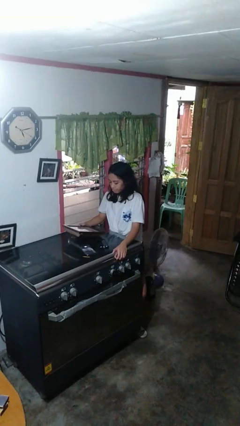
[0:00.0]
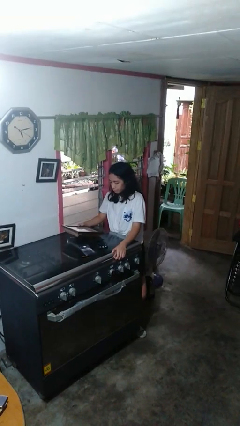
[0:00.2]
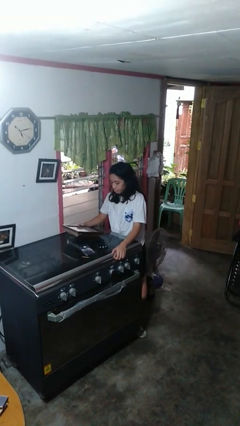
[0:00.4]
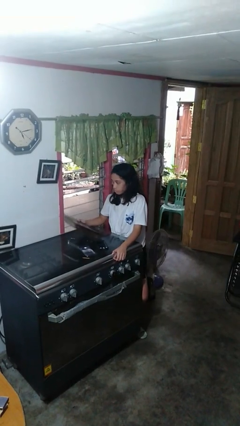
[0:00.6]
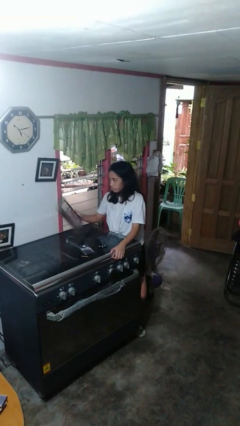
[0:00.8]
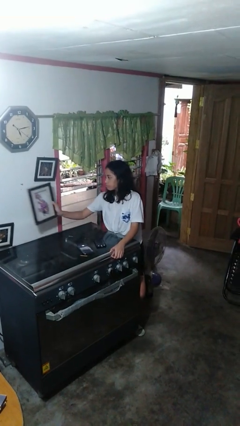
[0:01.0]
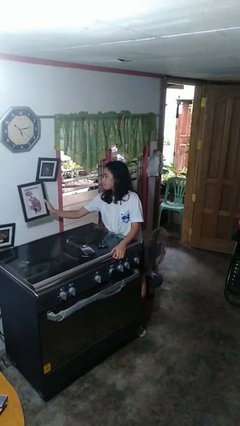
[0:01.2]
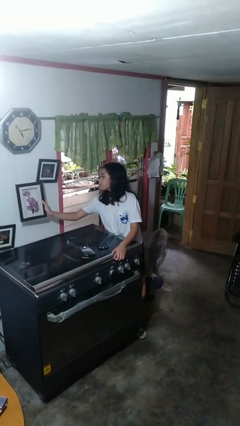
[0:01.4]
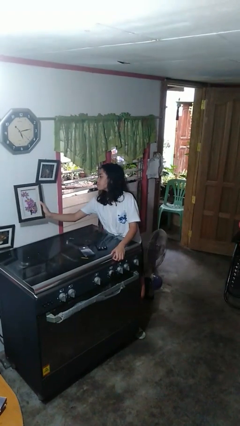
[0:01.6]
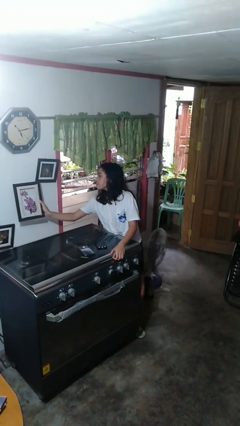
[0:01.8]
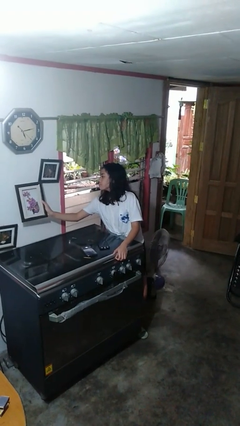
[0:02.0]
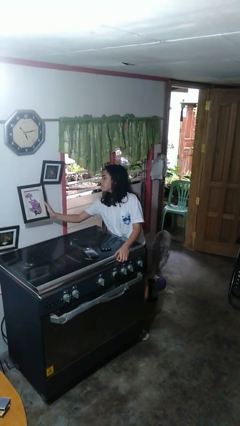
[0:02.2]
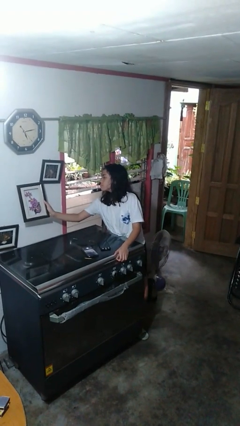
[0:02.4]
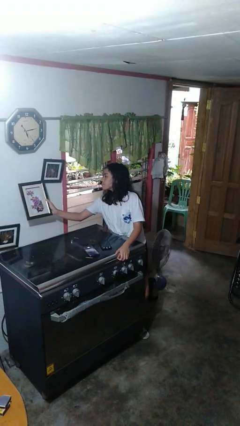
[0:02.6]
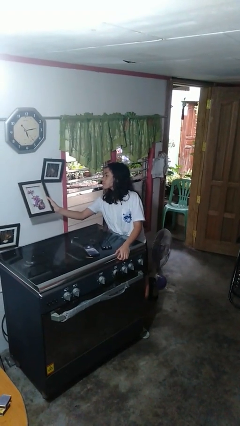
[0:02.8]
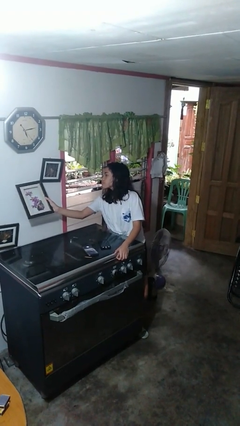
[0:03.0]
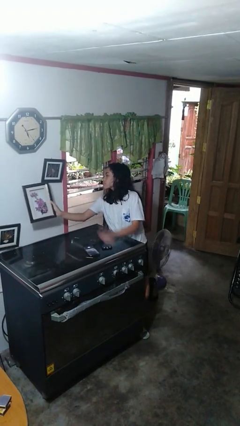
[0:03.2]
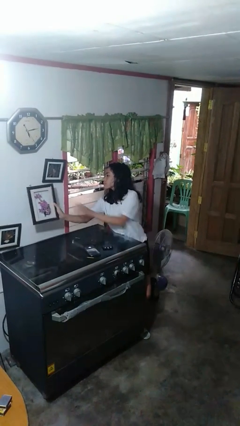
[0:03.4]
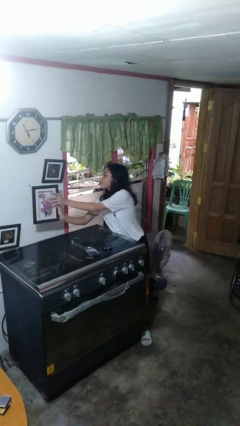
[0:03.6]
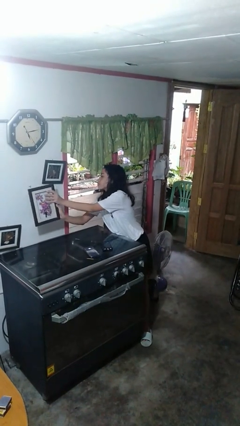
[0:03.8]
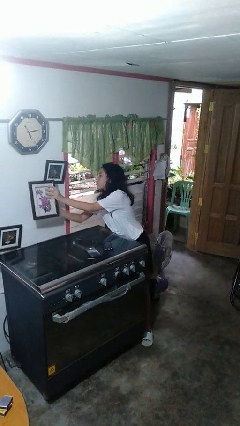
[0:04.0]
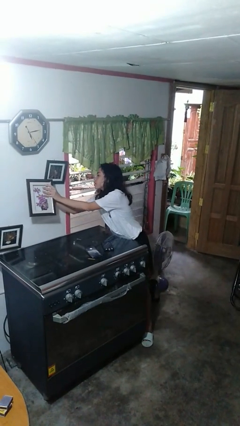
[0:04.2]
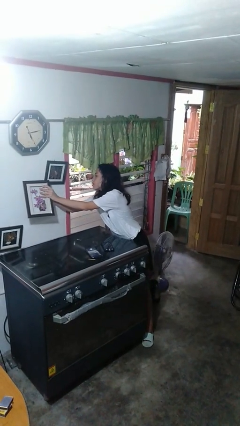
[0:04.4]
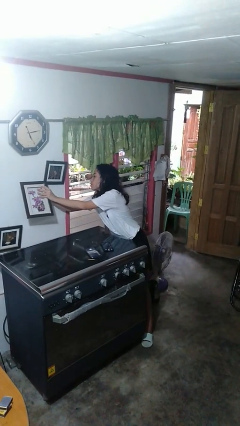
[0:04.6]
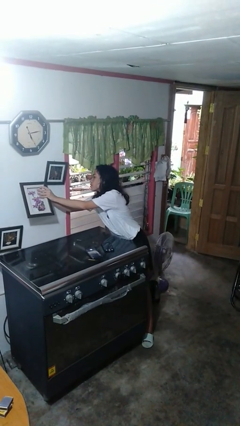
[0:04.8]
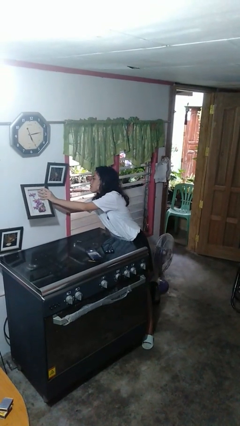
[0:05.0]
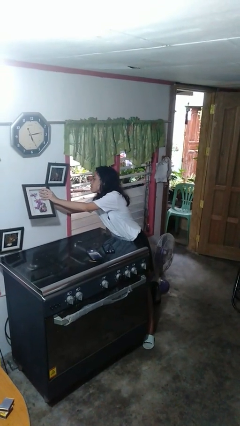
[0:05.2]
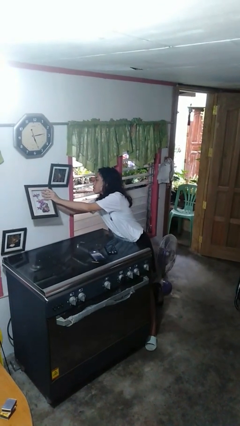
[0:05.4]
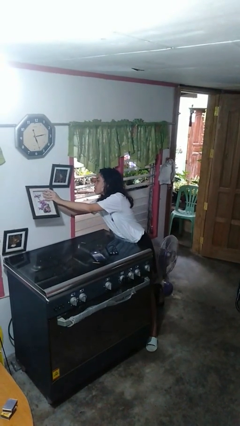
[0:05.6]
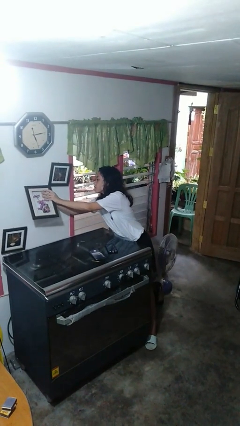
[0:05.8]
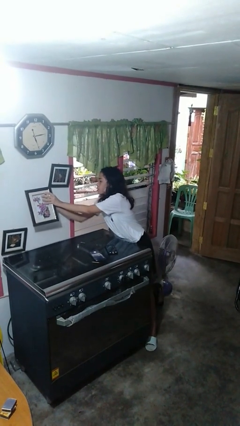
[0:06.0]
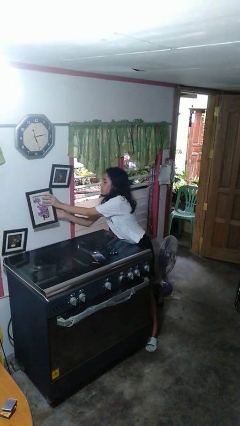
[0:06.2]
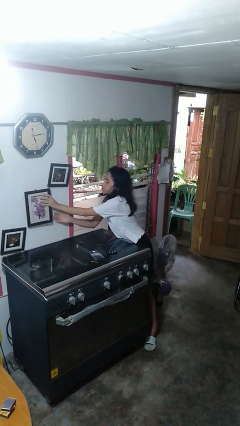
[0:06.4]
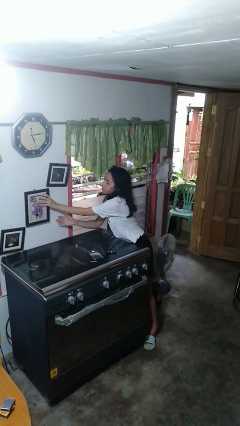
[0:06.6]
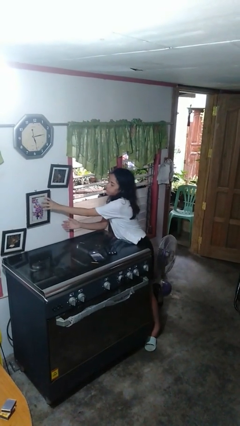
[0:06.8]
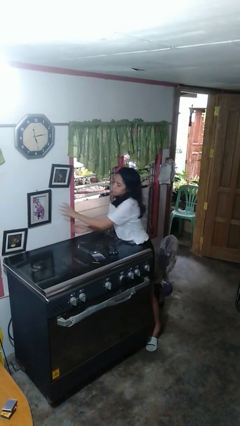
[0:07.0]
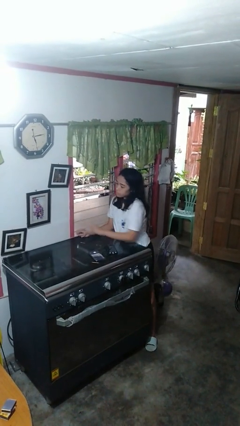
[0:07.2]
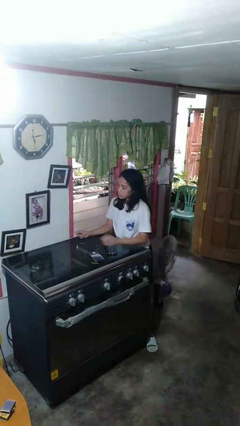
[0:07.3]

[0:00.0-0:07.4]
person puts up picture frame

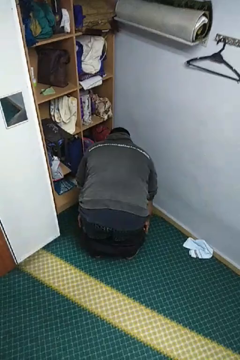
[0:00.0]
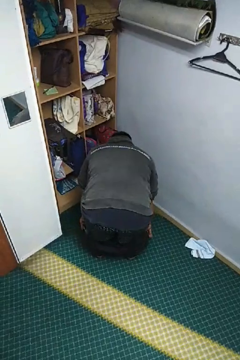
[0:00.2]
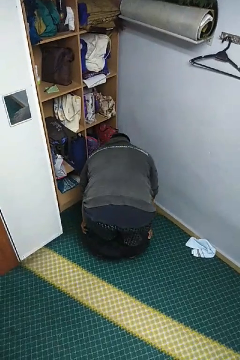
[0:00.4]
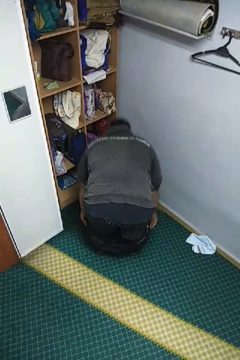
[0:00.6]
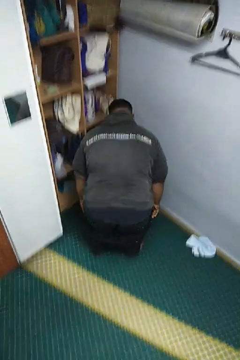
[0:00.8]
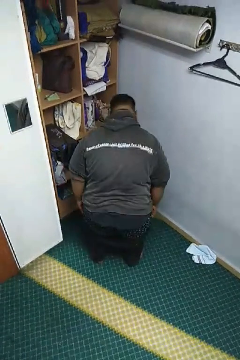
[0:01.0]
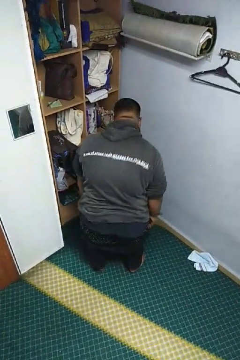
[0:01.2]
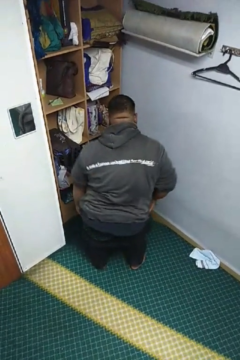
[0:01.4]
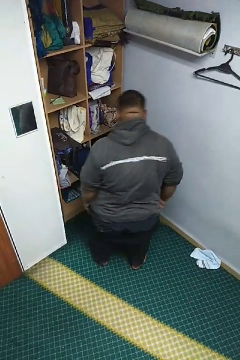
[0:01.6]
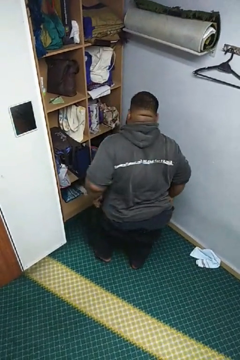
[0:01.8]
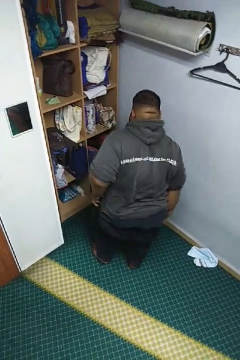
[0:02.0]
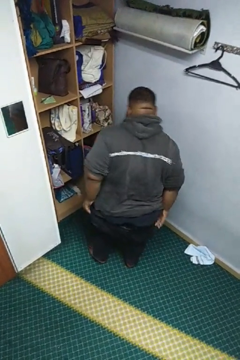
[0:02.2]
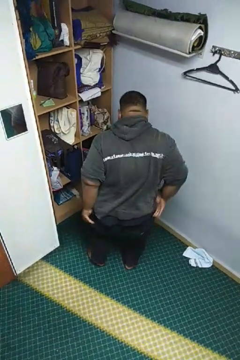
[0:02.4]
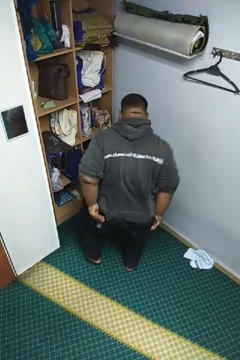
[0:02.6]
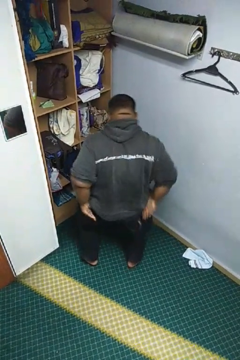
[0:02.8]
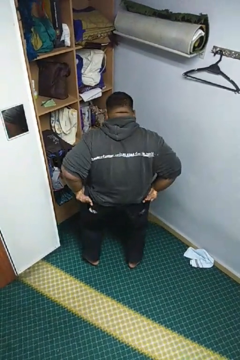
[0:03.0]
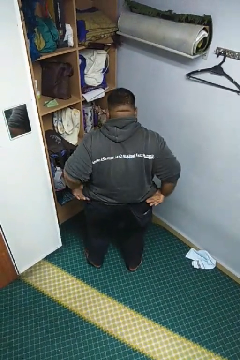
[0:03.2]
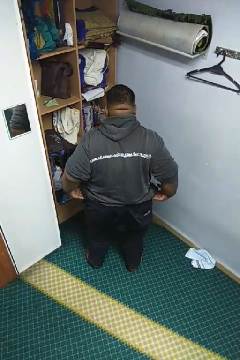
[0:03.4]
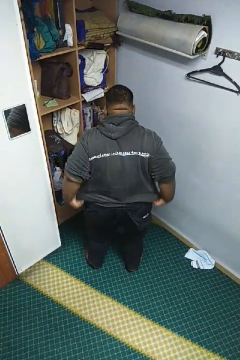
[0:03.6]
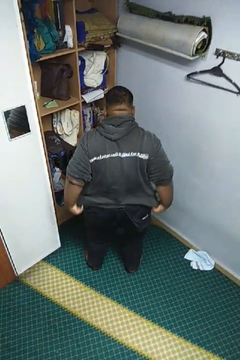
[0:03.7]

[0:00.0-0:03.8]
person puts on pants

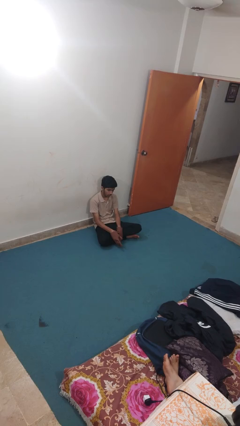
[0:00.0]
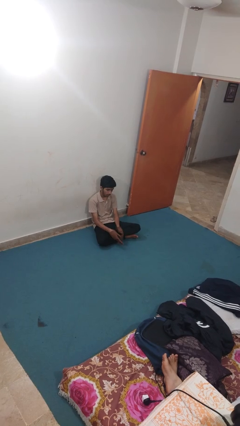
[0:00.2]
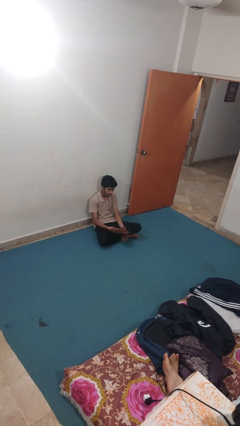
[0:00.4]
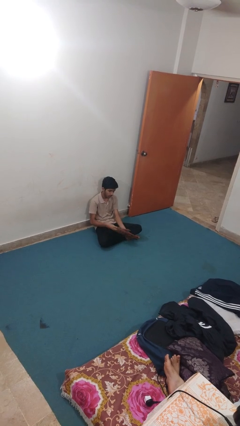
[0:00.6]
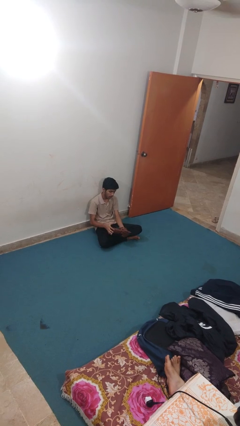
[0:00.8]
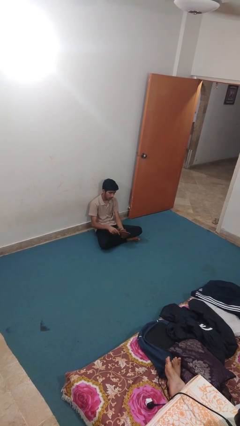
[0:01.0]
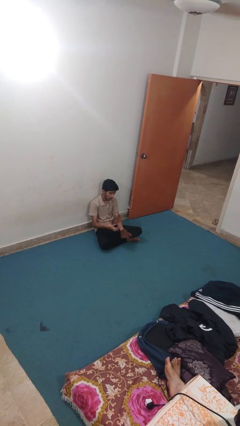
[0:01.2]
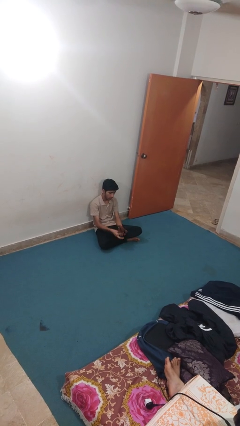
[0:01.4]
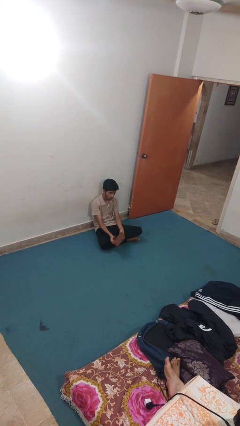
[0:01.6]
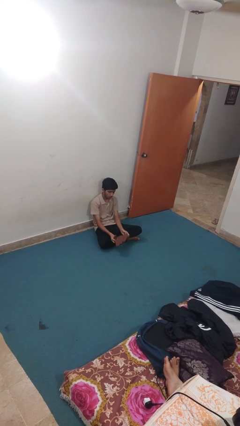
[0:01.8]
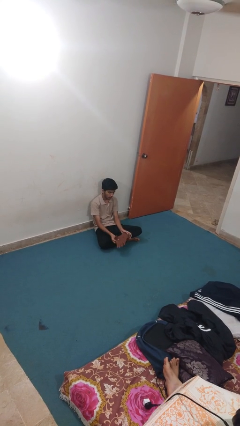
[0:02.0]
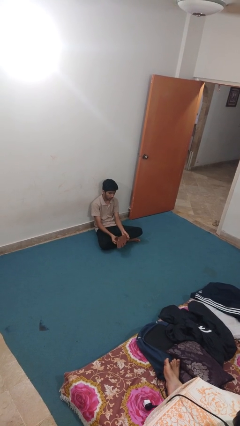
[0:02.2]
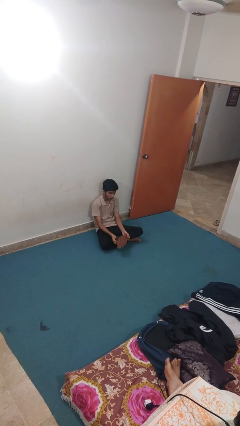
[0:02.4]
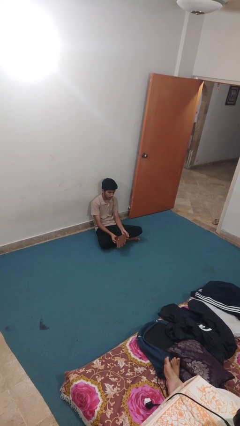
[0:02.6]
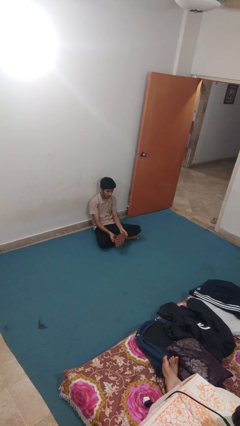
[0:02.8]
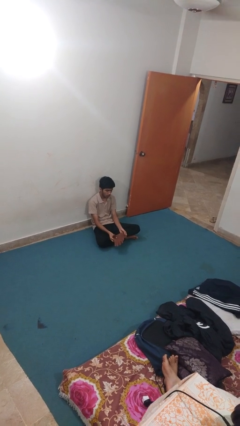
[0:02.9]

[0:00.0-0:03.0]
person takes off gloves

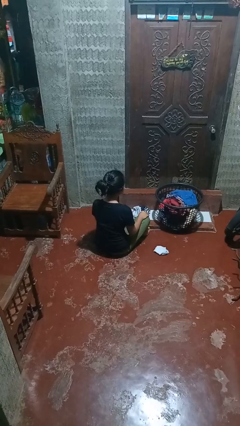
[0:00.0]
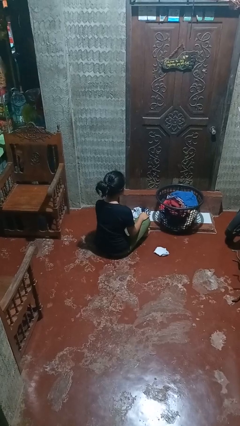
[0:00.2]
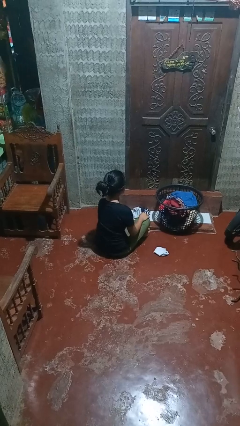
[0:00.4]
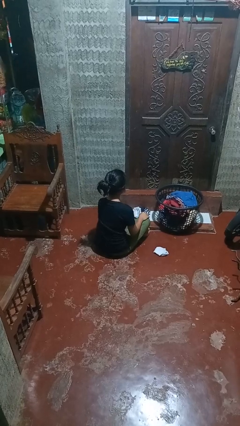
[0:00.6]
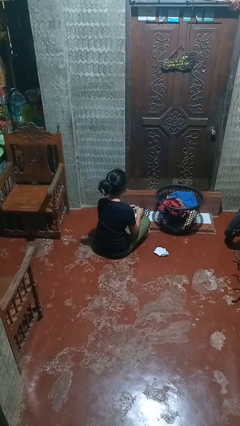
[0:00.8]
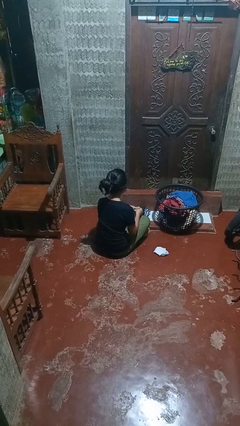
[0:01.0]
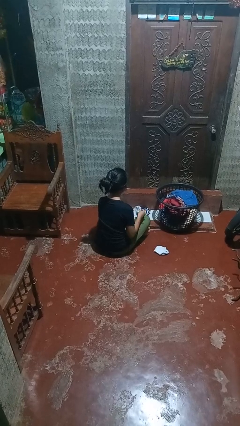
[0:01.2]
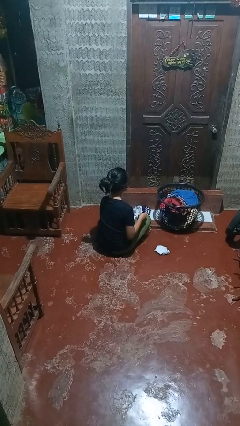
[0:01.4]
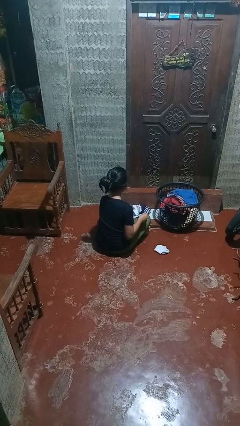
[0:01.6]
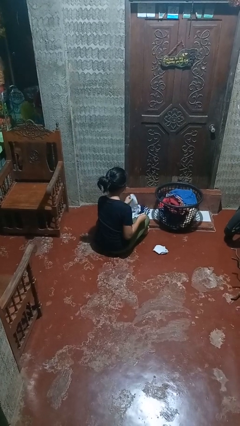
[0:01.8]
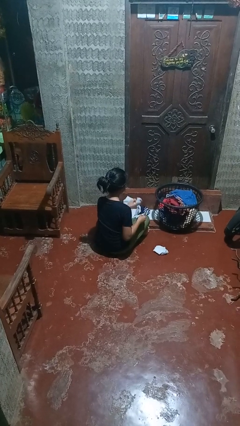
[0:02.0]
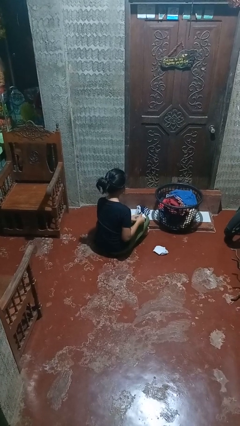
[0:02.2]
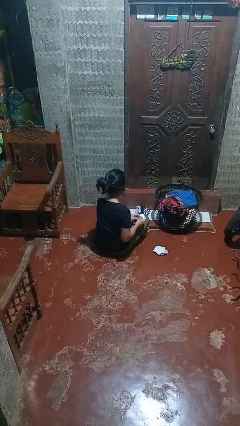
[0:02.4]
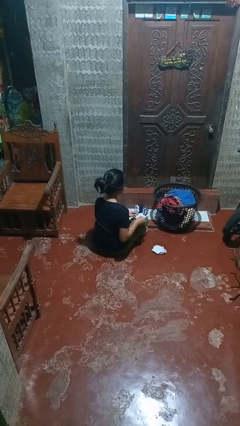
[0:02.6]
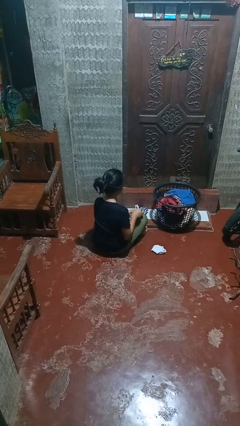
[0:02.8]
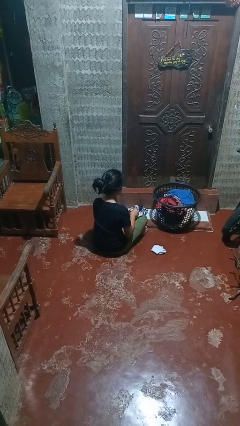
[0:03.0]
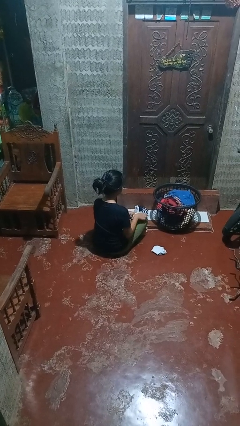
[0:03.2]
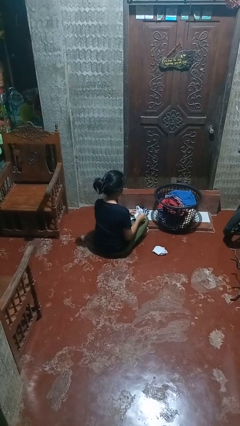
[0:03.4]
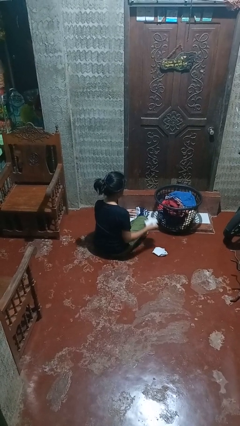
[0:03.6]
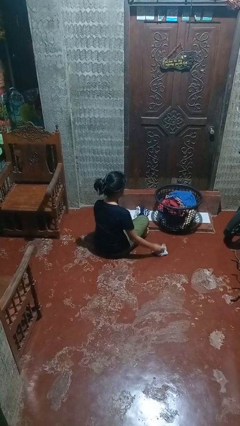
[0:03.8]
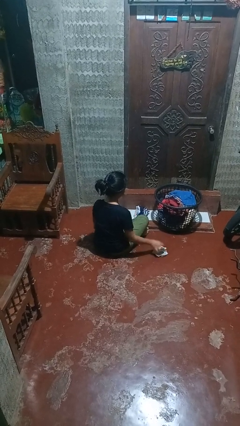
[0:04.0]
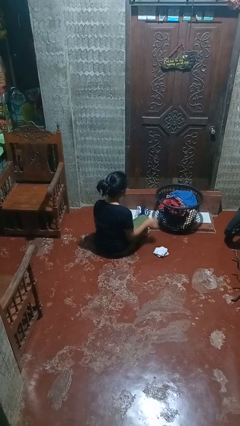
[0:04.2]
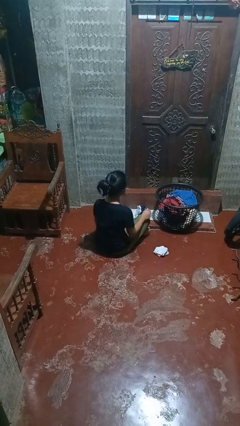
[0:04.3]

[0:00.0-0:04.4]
person folds socks
